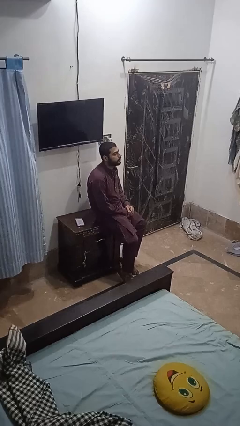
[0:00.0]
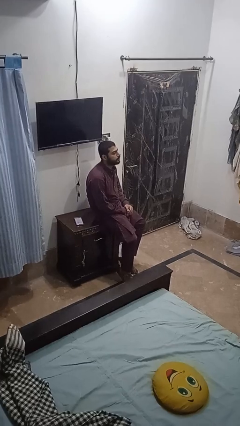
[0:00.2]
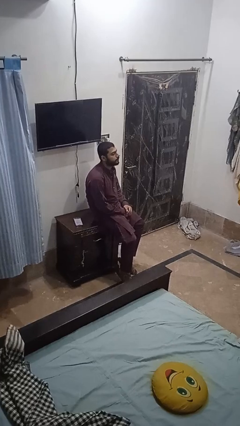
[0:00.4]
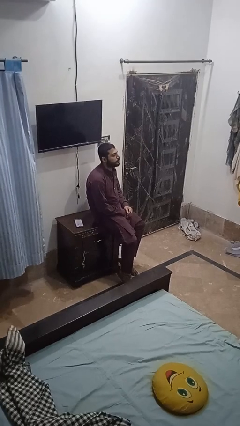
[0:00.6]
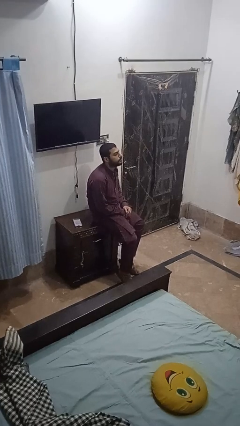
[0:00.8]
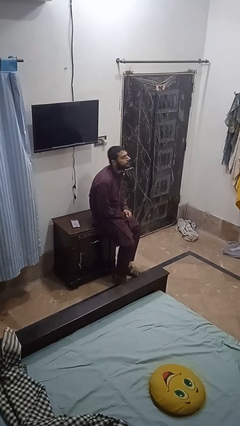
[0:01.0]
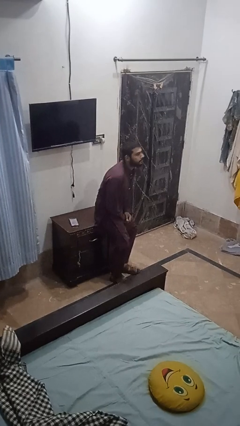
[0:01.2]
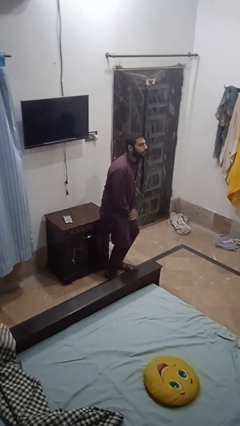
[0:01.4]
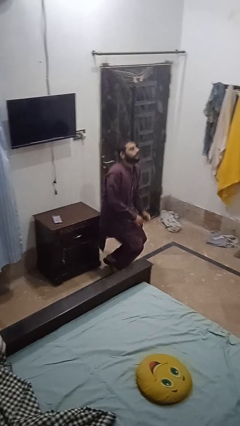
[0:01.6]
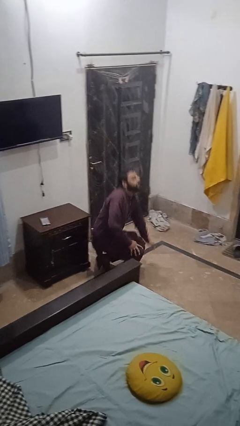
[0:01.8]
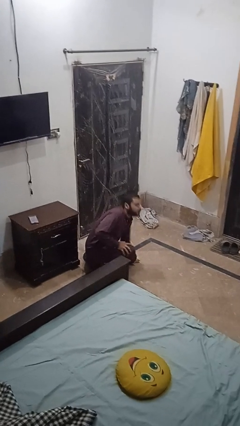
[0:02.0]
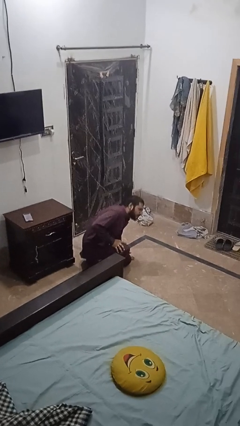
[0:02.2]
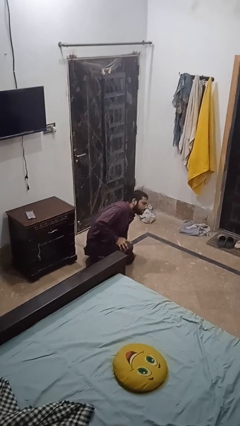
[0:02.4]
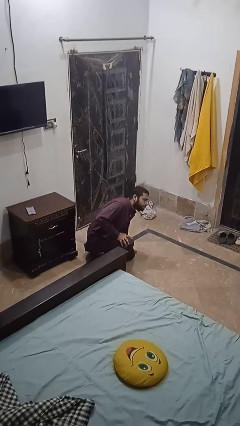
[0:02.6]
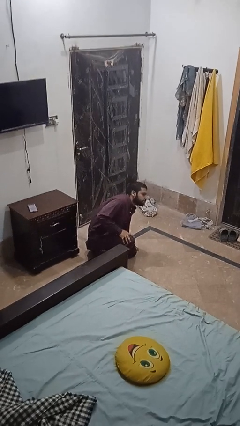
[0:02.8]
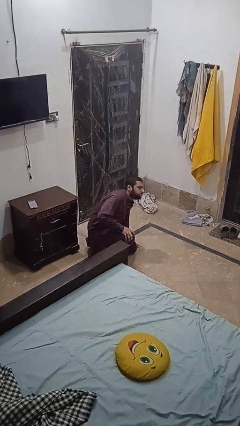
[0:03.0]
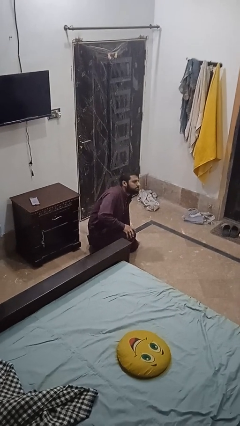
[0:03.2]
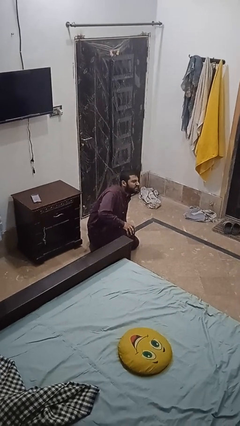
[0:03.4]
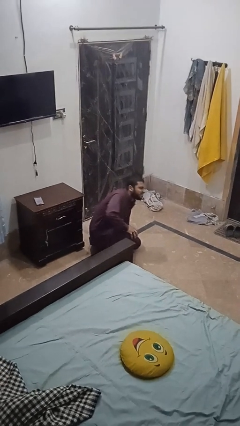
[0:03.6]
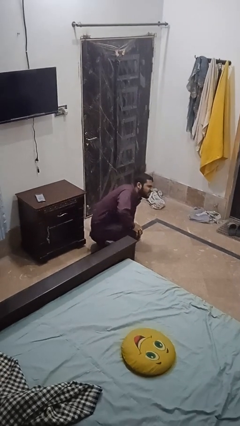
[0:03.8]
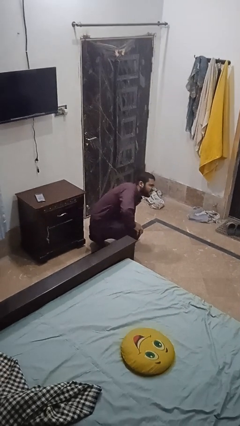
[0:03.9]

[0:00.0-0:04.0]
person falls from chair

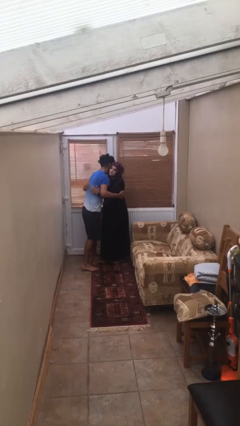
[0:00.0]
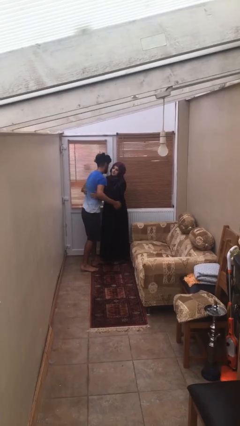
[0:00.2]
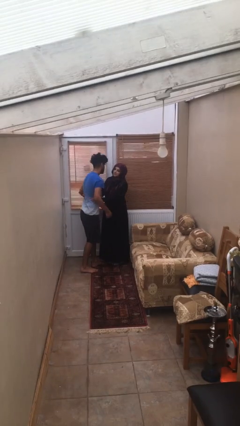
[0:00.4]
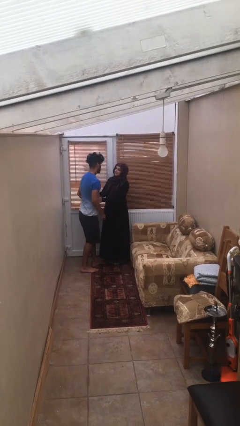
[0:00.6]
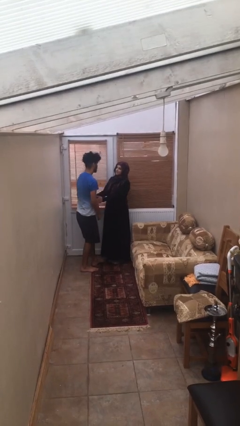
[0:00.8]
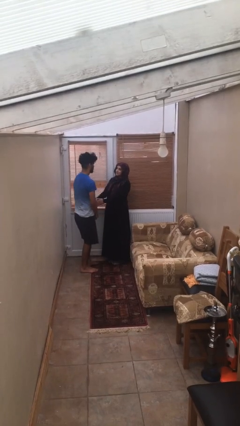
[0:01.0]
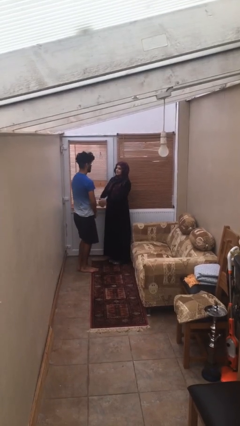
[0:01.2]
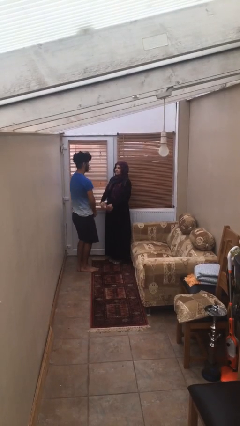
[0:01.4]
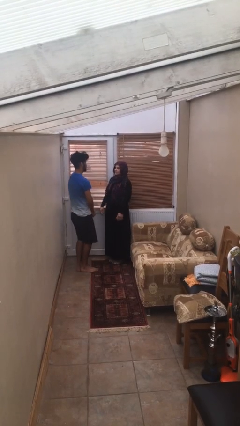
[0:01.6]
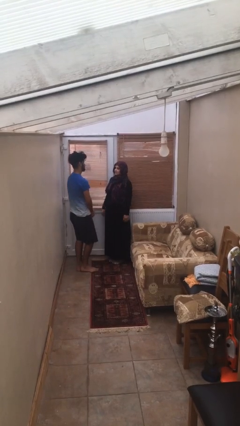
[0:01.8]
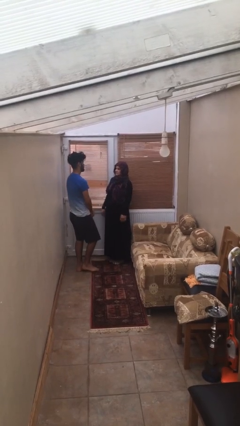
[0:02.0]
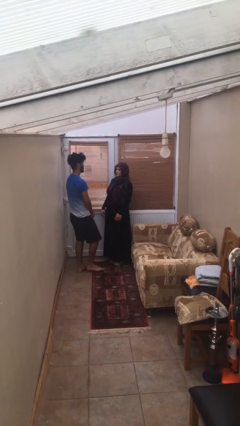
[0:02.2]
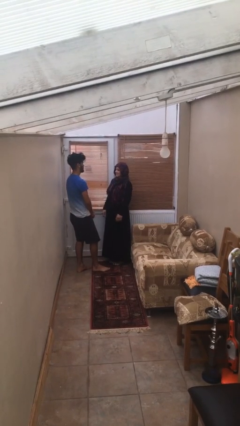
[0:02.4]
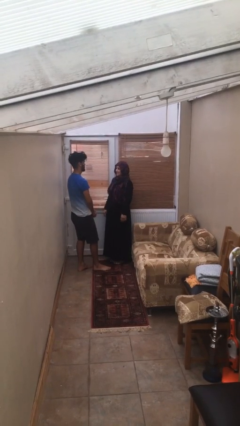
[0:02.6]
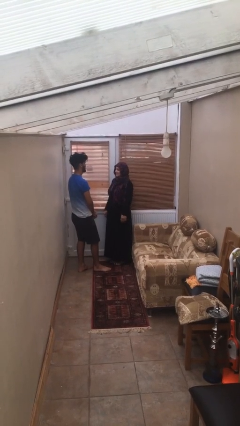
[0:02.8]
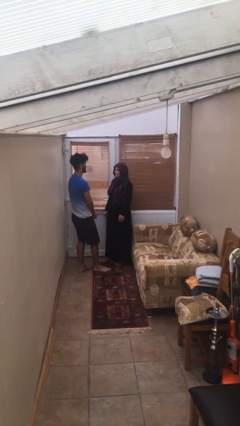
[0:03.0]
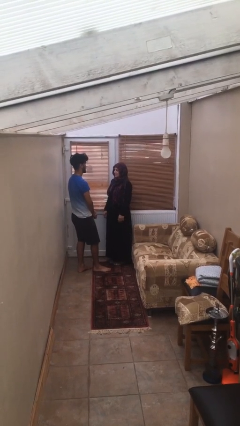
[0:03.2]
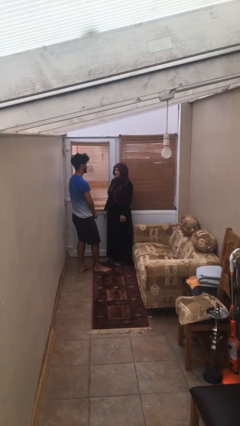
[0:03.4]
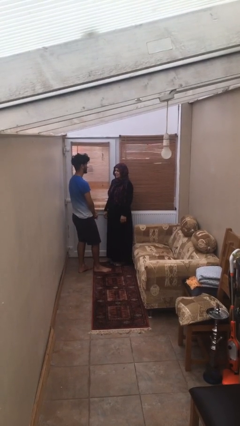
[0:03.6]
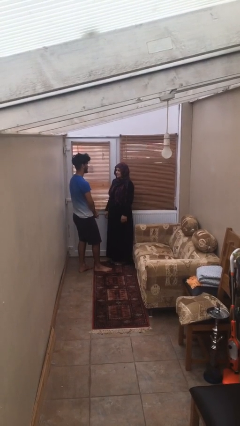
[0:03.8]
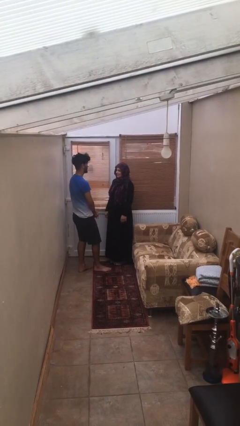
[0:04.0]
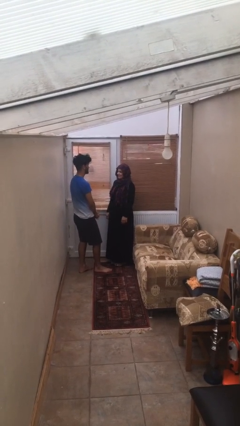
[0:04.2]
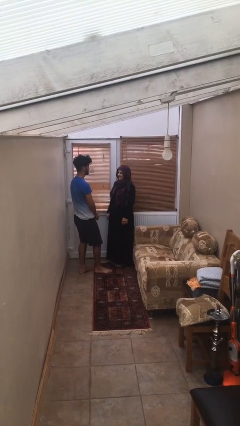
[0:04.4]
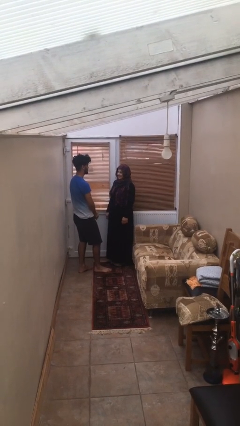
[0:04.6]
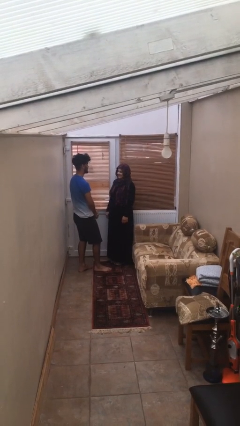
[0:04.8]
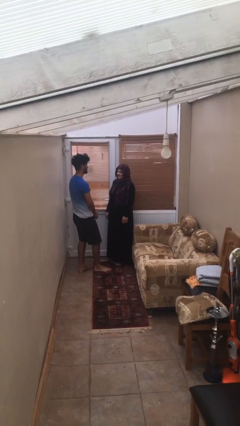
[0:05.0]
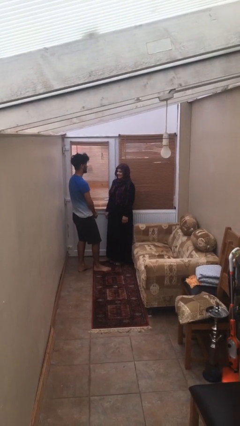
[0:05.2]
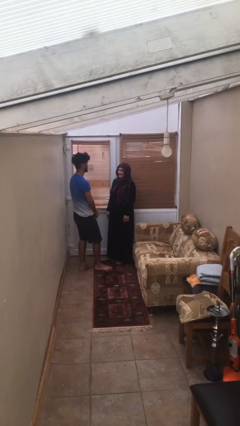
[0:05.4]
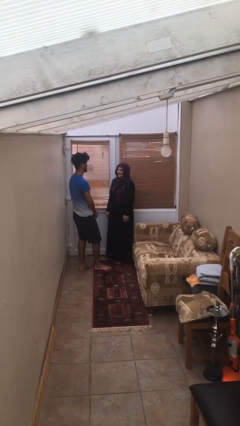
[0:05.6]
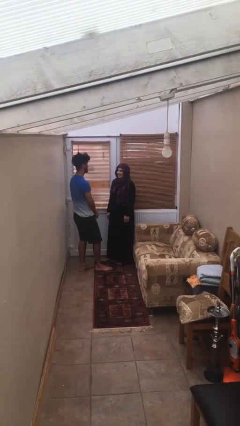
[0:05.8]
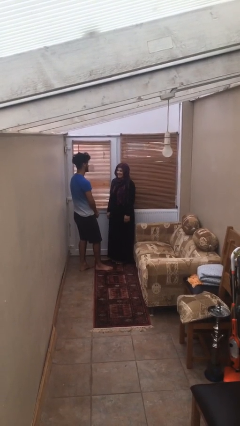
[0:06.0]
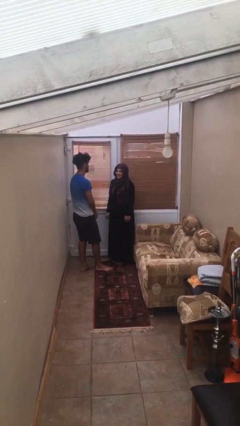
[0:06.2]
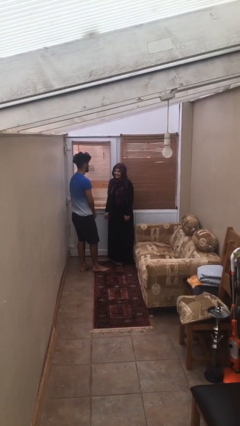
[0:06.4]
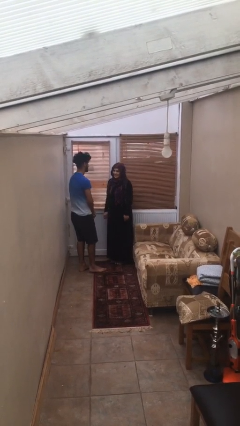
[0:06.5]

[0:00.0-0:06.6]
person talks to person

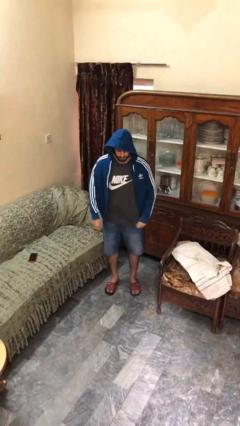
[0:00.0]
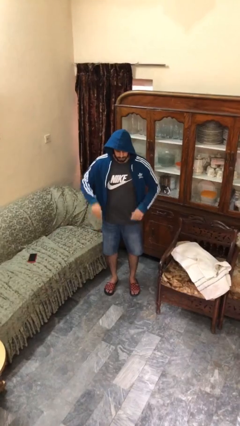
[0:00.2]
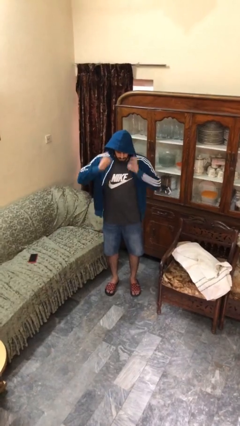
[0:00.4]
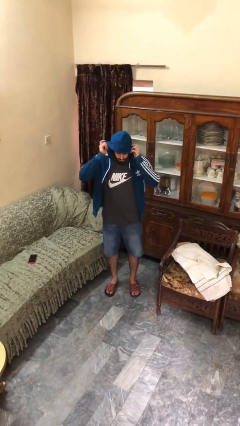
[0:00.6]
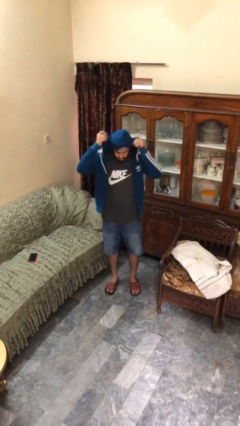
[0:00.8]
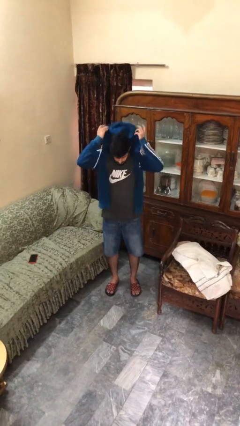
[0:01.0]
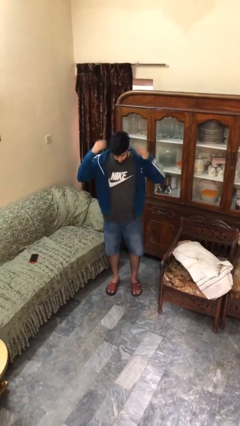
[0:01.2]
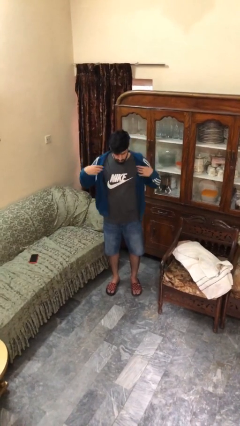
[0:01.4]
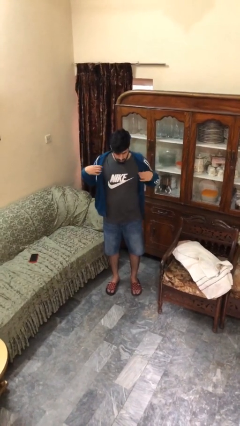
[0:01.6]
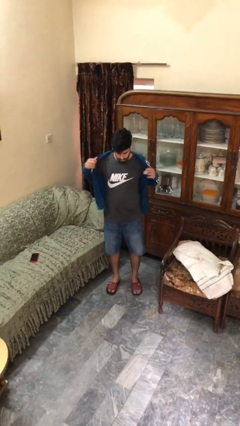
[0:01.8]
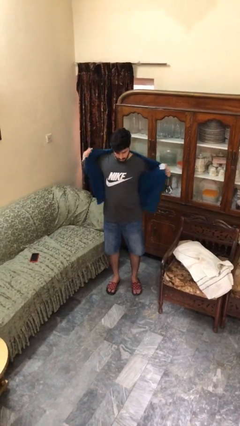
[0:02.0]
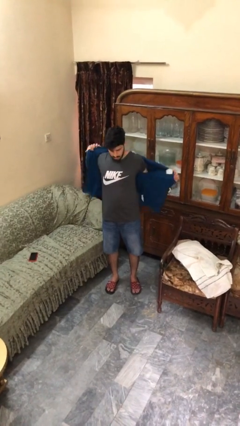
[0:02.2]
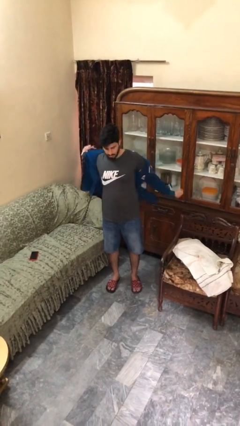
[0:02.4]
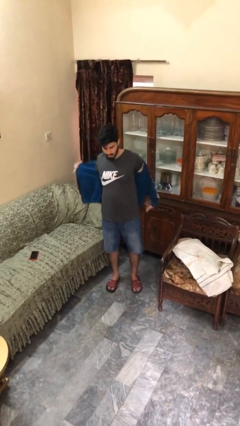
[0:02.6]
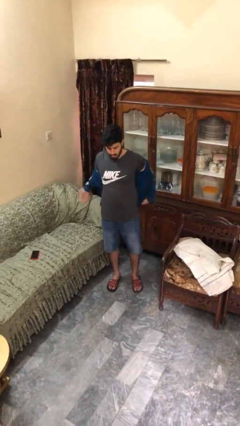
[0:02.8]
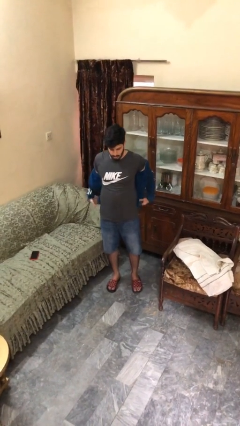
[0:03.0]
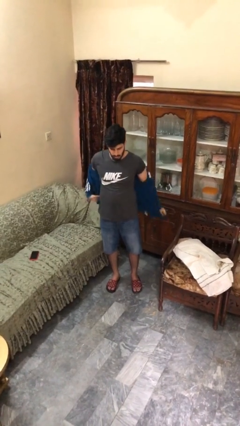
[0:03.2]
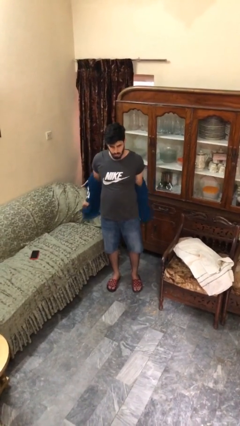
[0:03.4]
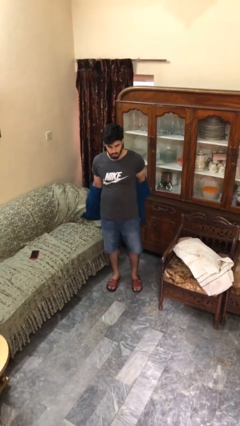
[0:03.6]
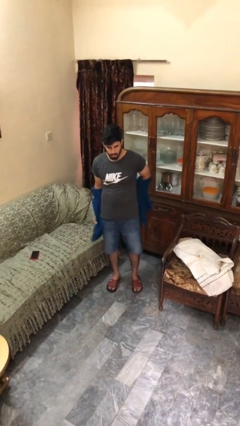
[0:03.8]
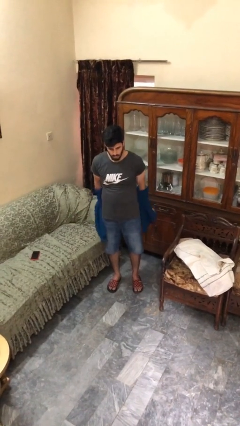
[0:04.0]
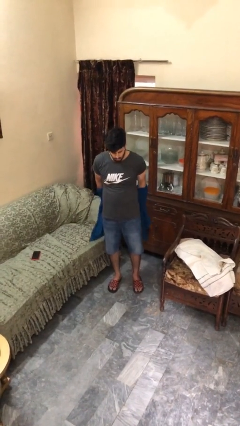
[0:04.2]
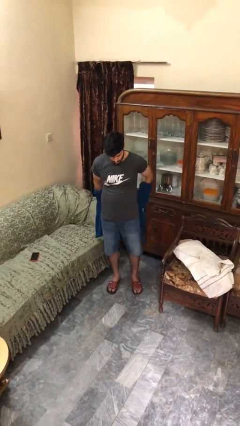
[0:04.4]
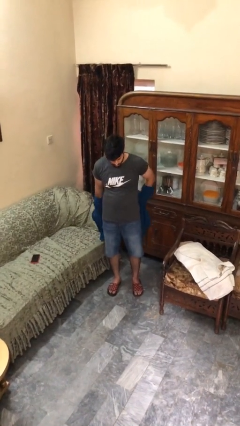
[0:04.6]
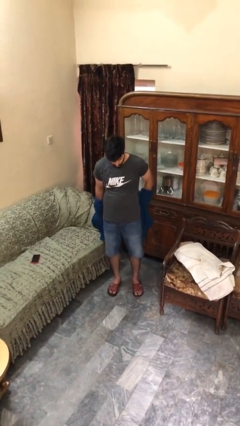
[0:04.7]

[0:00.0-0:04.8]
person takes off hoodie

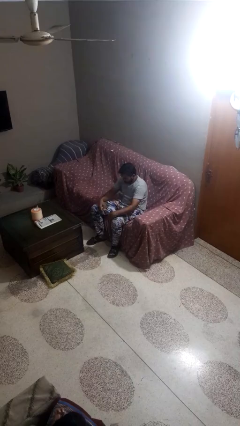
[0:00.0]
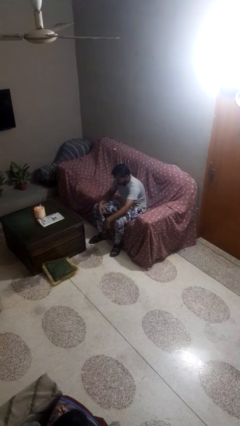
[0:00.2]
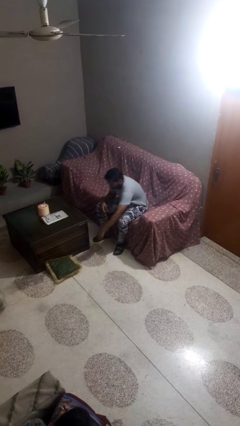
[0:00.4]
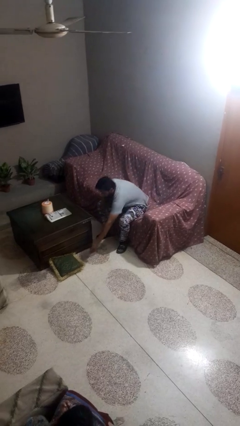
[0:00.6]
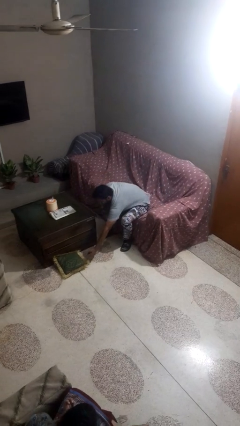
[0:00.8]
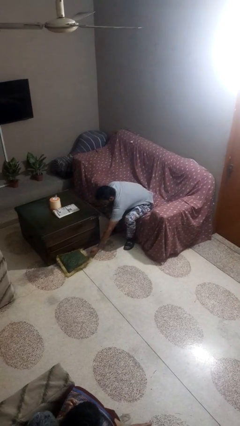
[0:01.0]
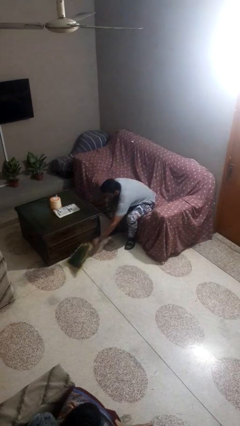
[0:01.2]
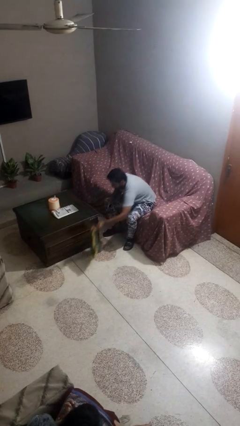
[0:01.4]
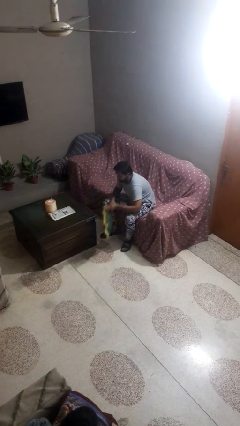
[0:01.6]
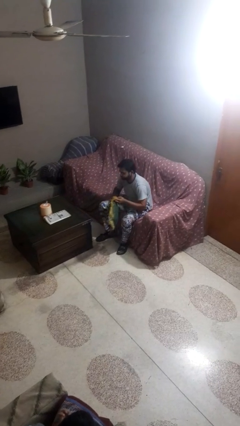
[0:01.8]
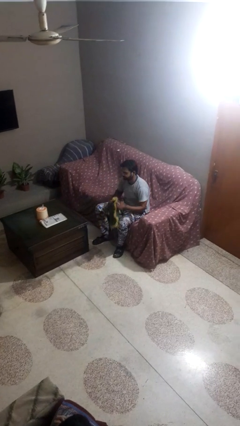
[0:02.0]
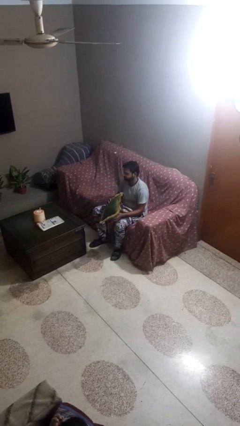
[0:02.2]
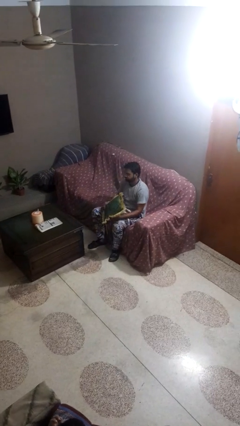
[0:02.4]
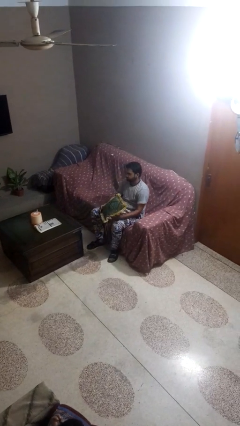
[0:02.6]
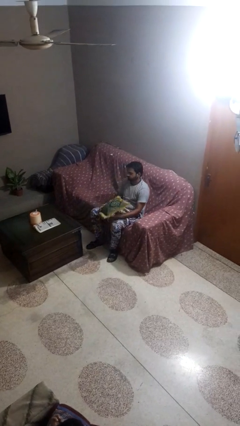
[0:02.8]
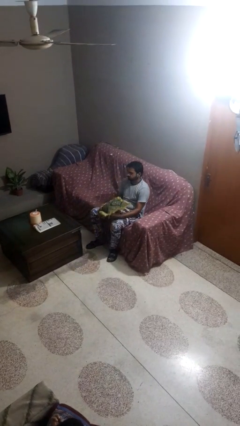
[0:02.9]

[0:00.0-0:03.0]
person picks up object from floor
